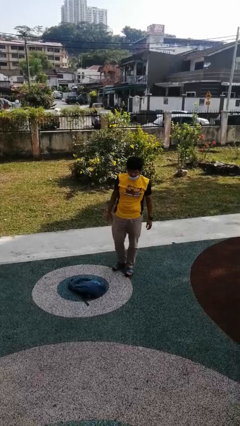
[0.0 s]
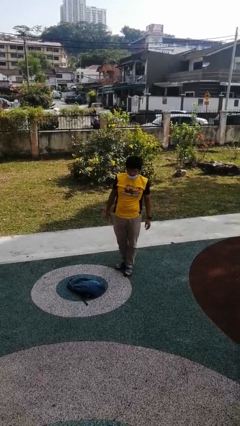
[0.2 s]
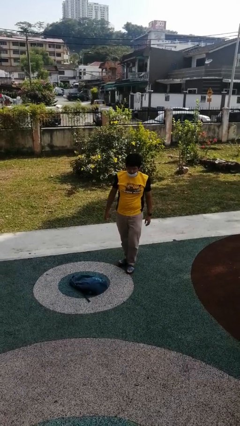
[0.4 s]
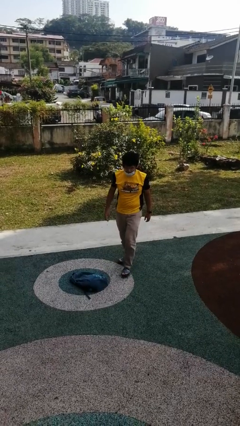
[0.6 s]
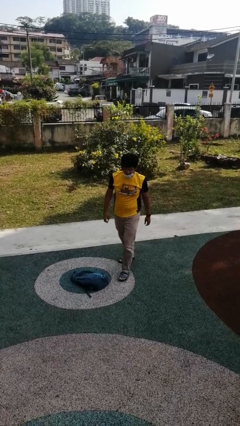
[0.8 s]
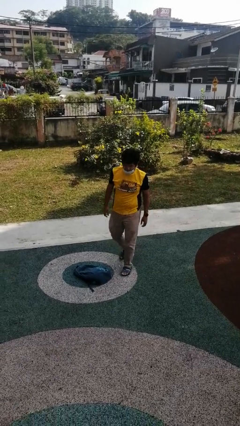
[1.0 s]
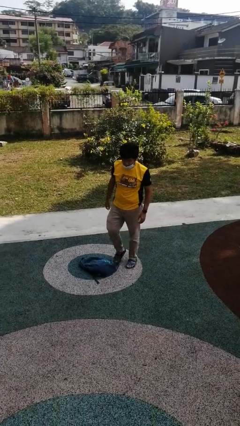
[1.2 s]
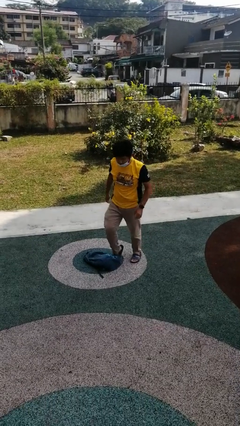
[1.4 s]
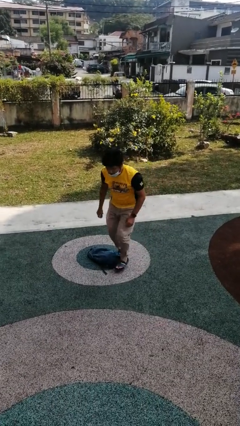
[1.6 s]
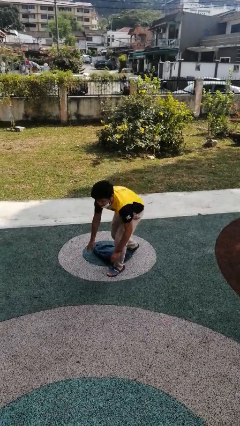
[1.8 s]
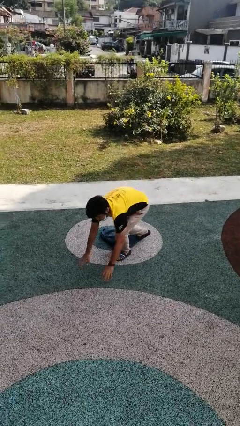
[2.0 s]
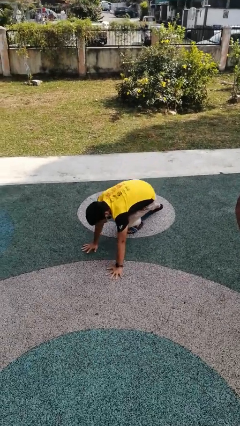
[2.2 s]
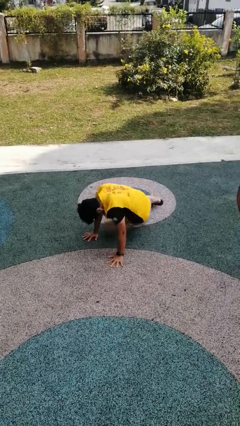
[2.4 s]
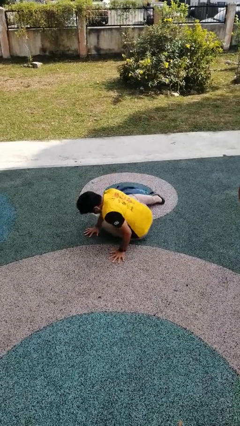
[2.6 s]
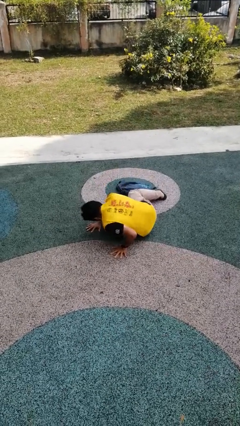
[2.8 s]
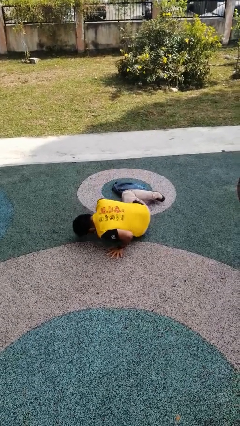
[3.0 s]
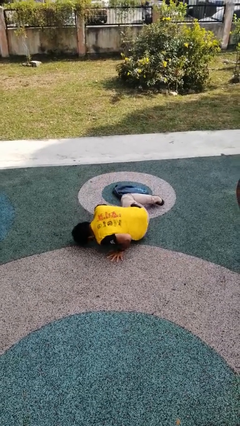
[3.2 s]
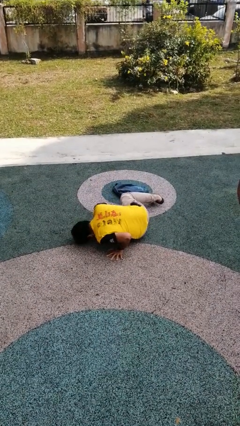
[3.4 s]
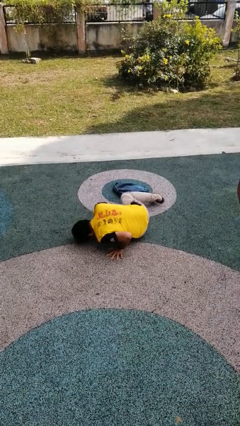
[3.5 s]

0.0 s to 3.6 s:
person trips on object on floor

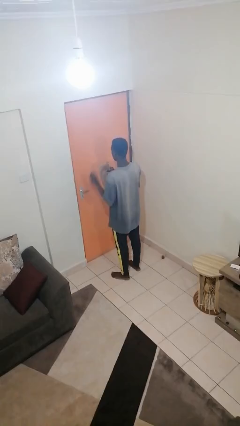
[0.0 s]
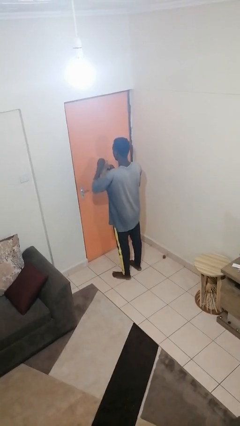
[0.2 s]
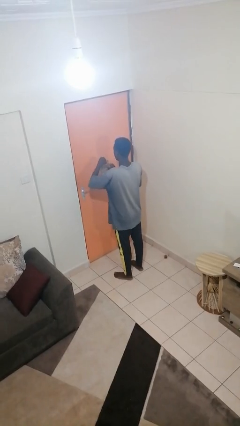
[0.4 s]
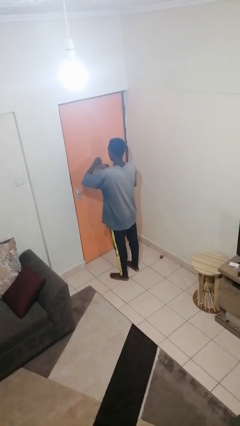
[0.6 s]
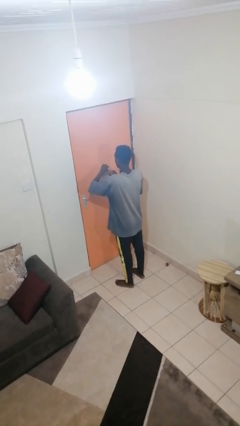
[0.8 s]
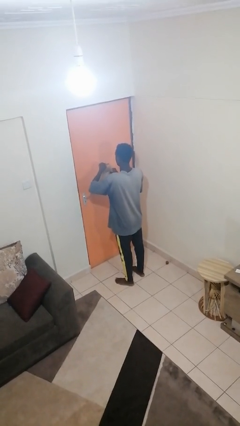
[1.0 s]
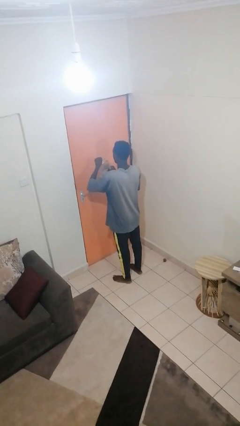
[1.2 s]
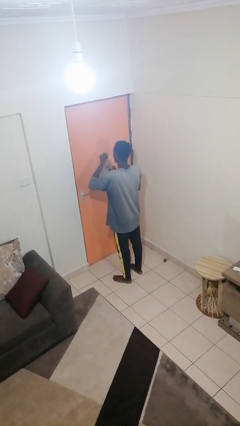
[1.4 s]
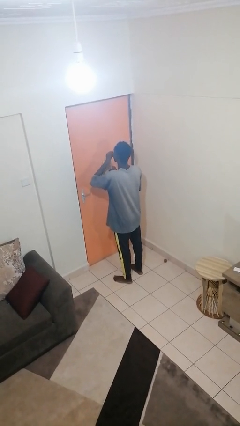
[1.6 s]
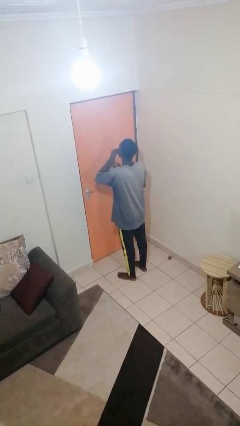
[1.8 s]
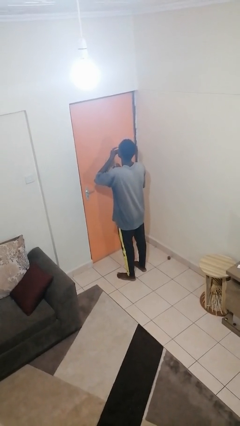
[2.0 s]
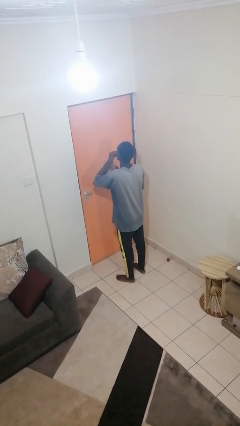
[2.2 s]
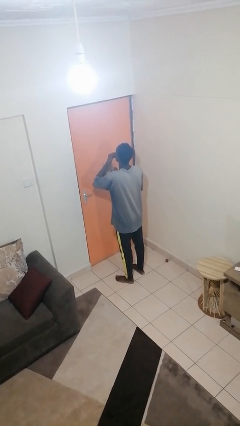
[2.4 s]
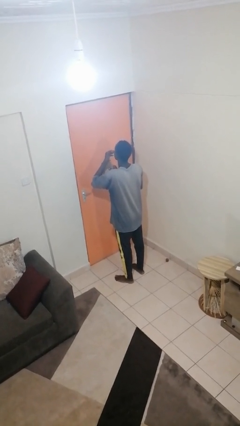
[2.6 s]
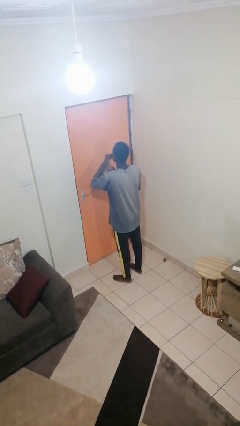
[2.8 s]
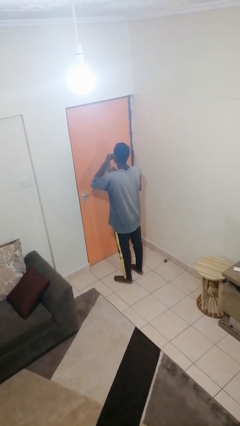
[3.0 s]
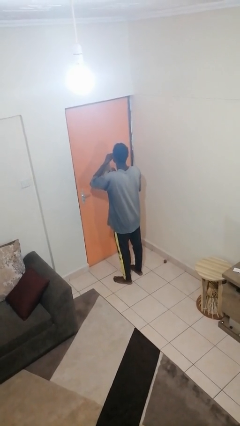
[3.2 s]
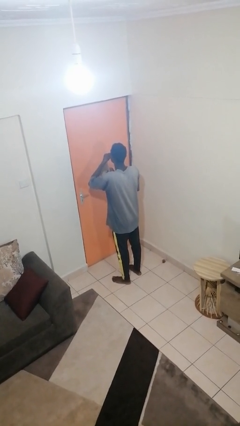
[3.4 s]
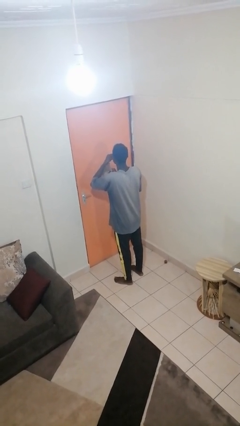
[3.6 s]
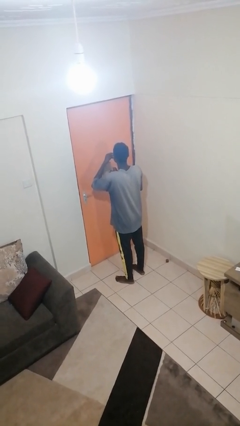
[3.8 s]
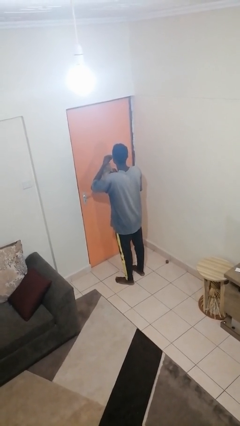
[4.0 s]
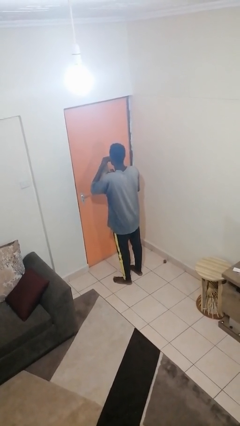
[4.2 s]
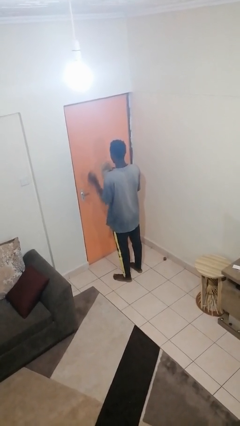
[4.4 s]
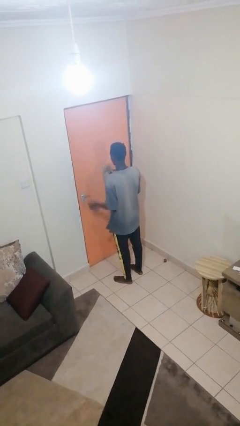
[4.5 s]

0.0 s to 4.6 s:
person eats snack from bag

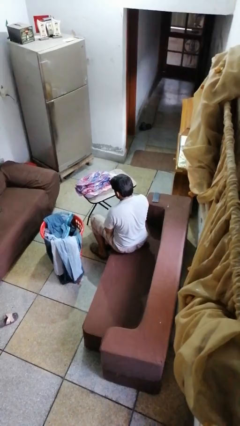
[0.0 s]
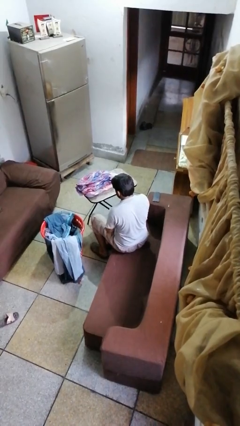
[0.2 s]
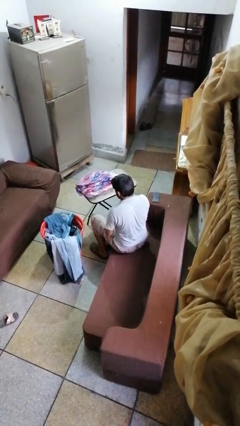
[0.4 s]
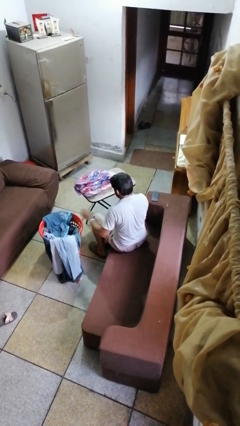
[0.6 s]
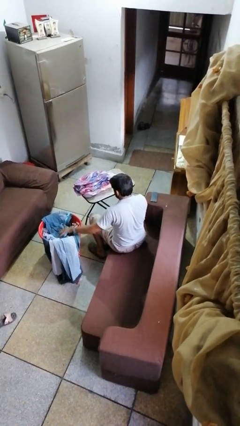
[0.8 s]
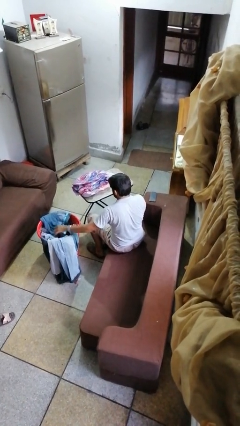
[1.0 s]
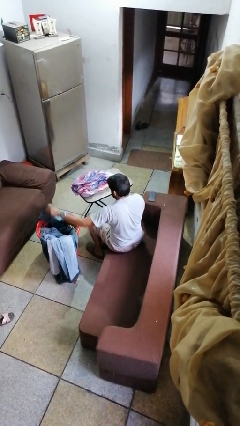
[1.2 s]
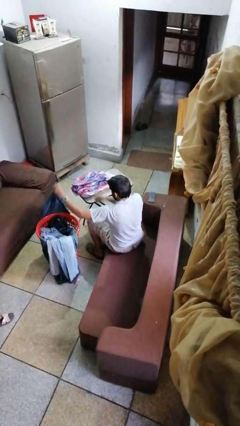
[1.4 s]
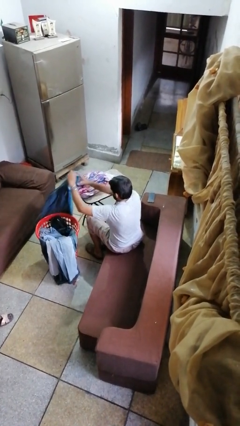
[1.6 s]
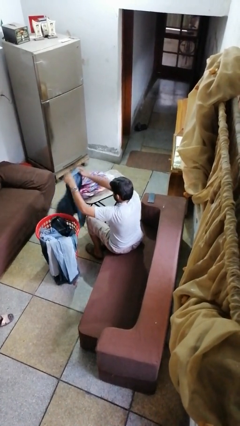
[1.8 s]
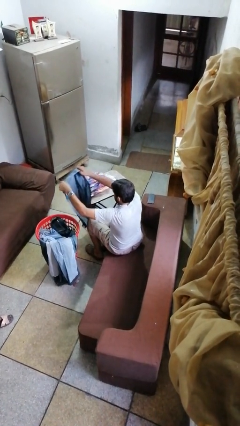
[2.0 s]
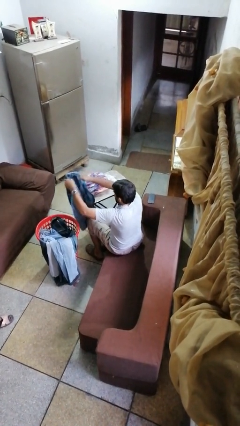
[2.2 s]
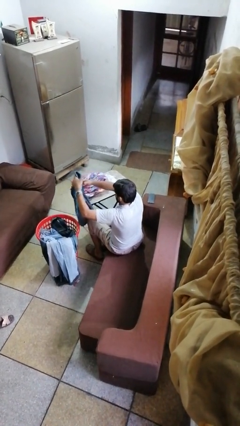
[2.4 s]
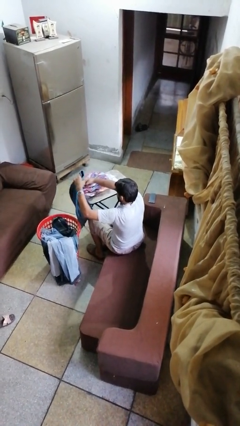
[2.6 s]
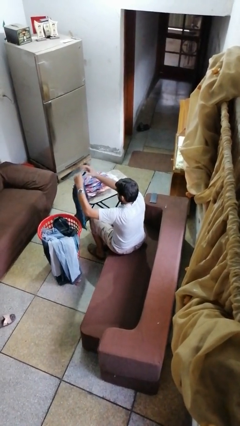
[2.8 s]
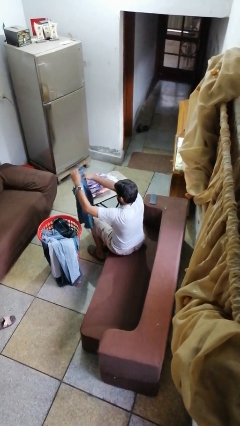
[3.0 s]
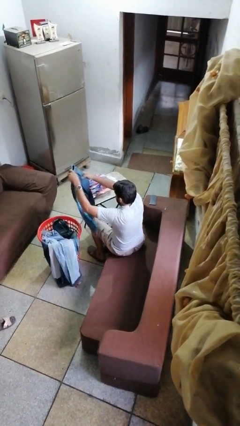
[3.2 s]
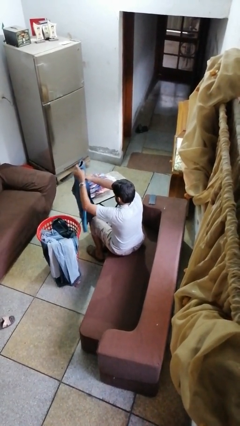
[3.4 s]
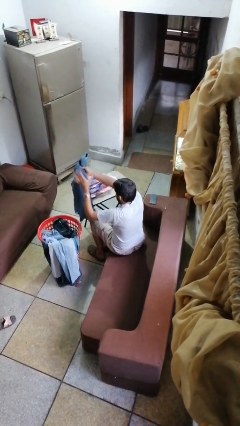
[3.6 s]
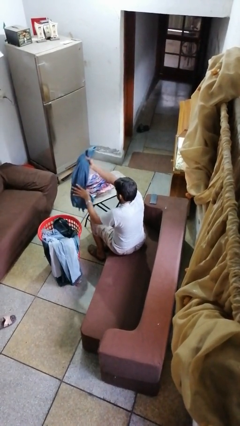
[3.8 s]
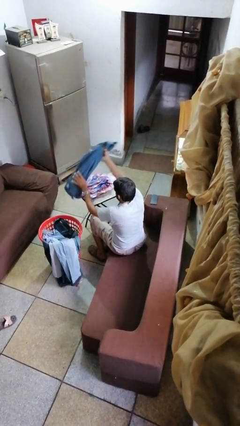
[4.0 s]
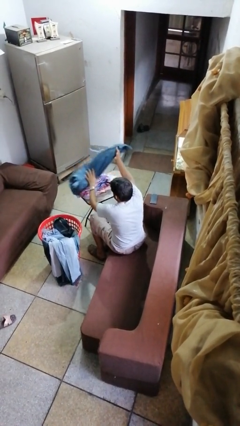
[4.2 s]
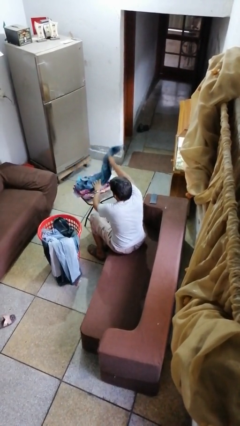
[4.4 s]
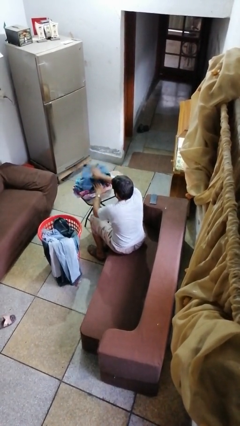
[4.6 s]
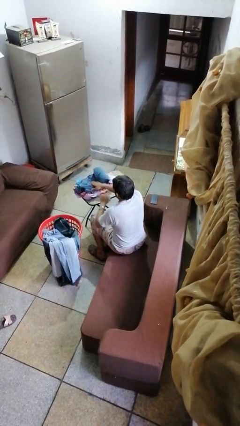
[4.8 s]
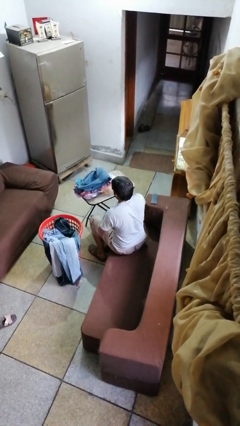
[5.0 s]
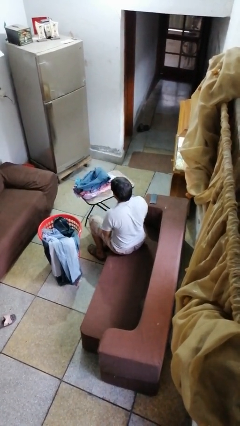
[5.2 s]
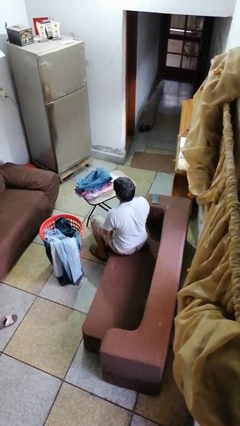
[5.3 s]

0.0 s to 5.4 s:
person folds shirt

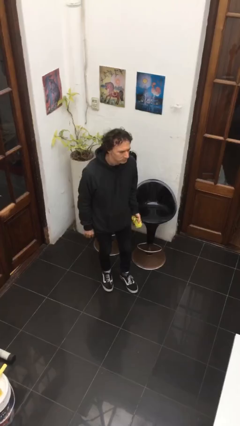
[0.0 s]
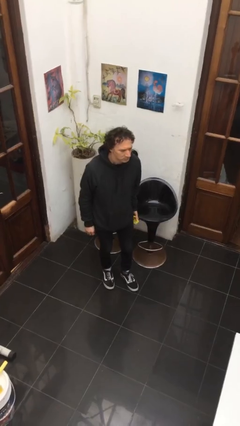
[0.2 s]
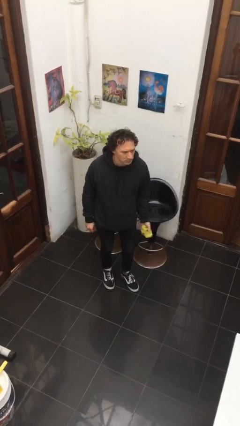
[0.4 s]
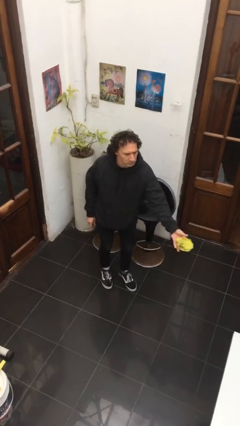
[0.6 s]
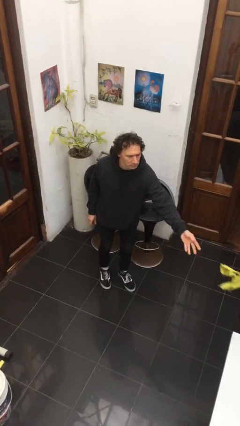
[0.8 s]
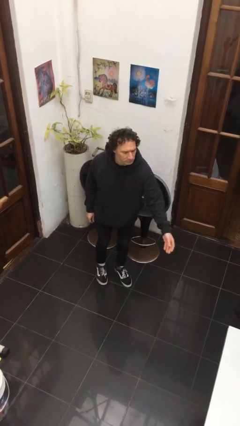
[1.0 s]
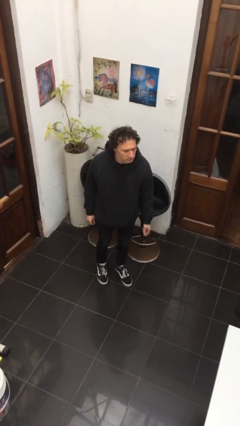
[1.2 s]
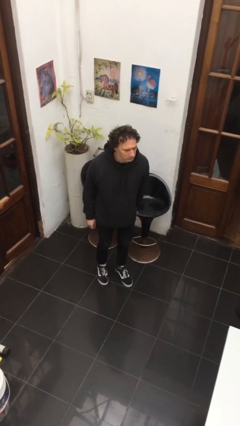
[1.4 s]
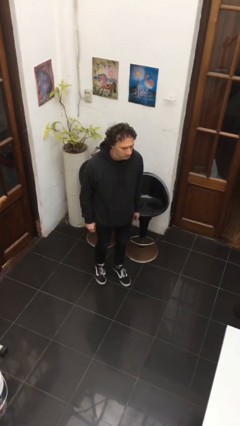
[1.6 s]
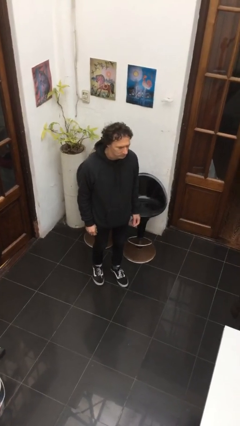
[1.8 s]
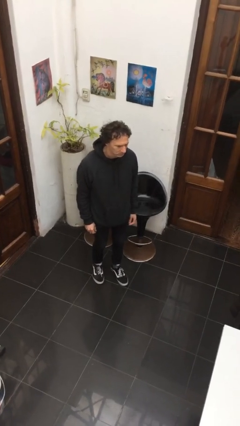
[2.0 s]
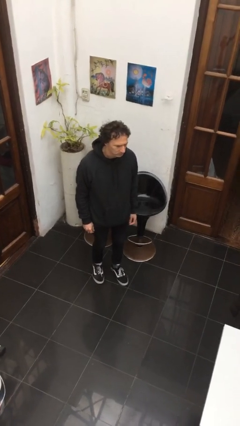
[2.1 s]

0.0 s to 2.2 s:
person throws object on table

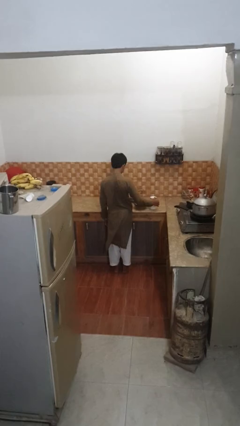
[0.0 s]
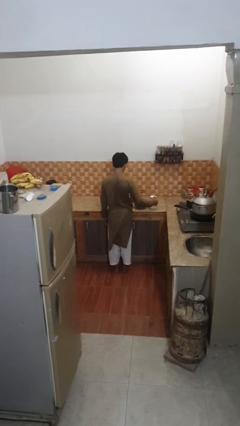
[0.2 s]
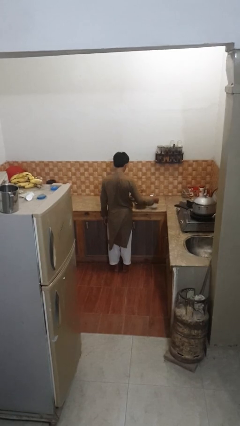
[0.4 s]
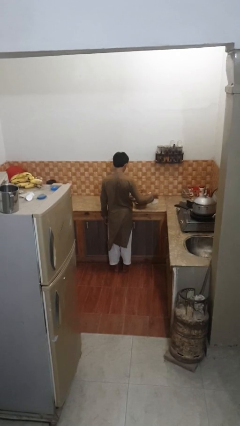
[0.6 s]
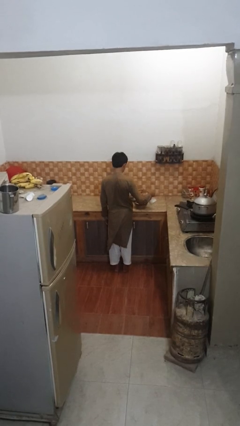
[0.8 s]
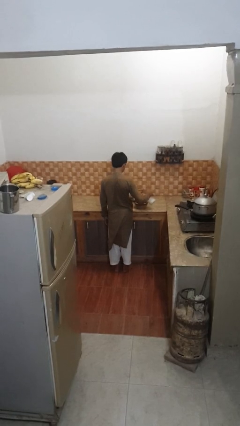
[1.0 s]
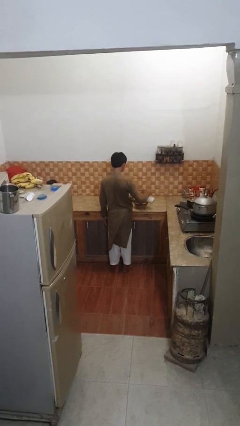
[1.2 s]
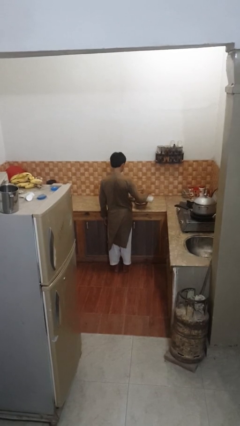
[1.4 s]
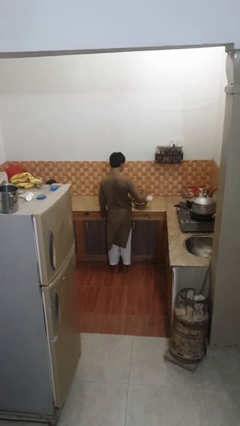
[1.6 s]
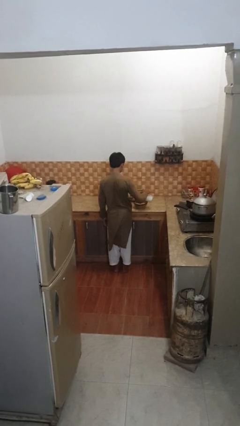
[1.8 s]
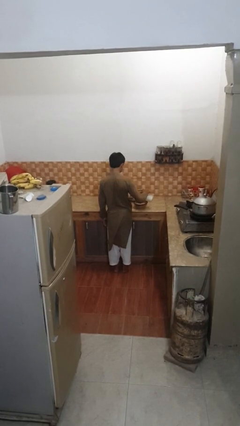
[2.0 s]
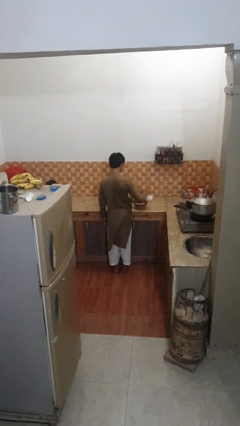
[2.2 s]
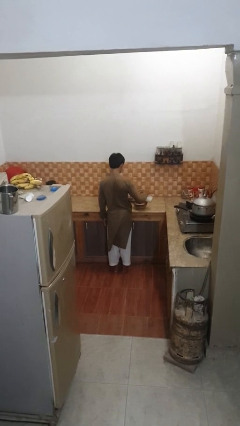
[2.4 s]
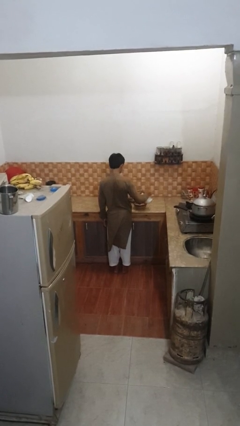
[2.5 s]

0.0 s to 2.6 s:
person pours into bowl
